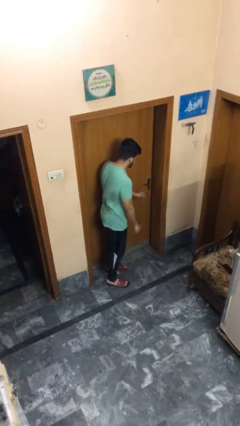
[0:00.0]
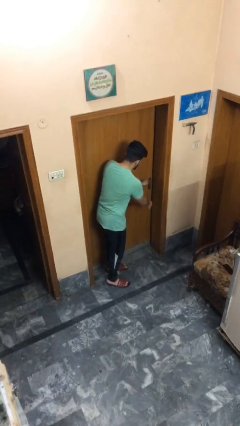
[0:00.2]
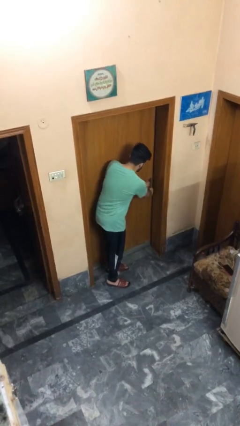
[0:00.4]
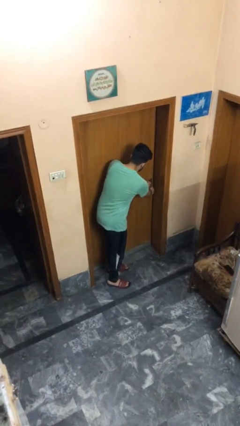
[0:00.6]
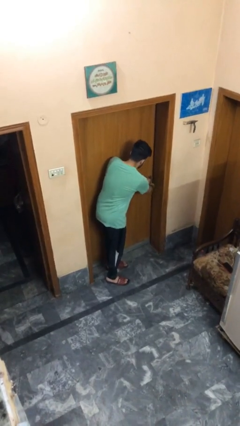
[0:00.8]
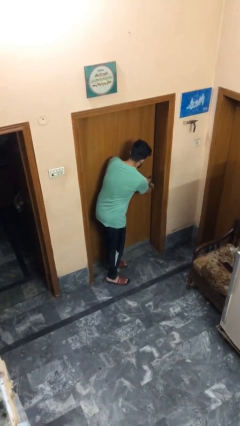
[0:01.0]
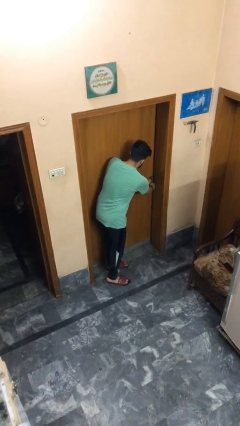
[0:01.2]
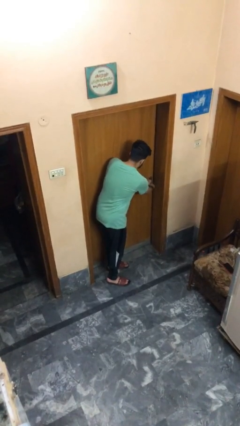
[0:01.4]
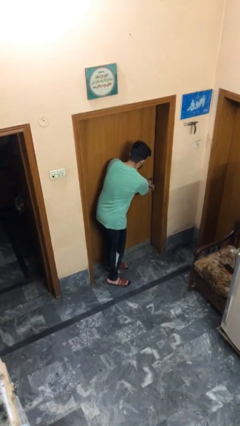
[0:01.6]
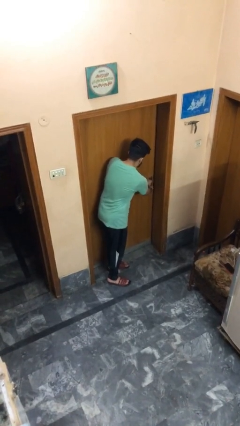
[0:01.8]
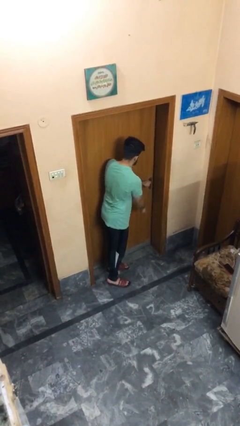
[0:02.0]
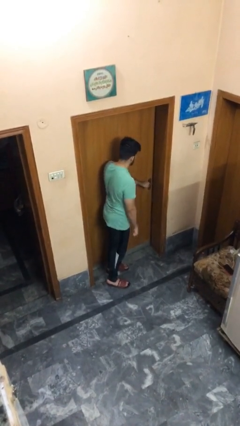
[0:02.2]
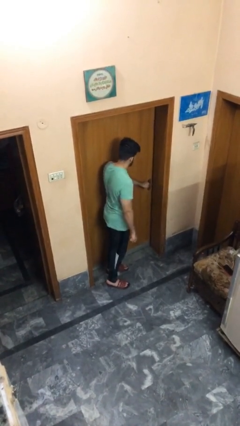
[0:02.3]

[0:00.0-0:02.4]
person unlocks door with keys

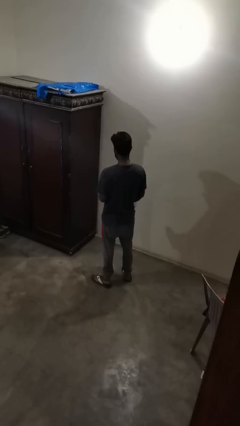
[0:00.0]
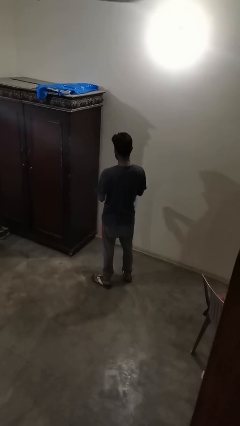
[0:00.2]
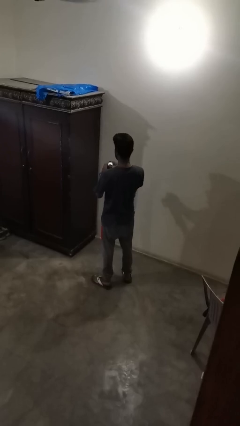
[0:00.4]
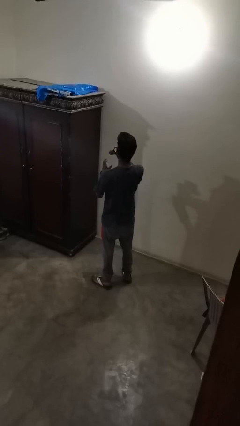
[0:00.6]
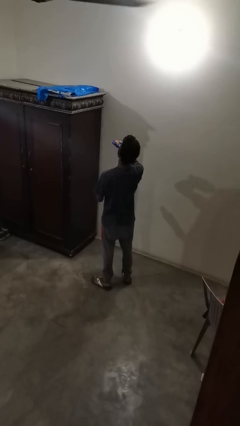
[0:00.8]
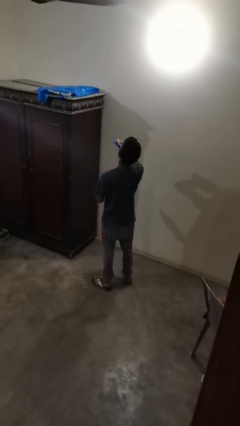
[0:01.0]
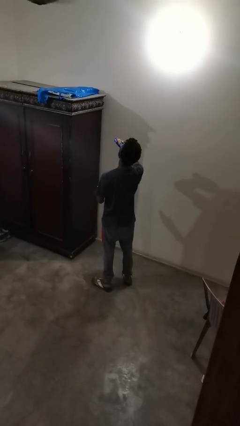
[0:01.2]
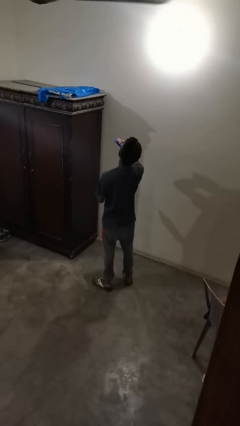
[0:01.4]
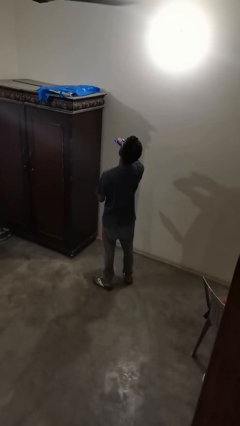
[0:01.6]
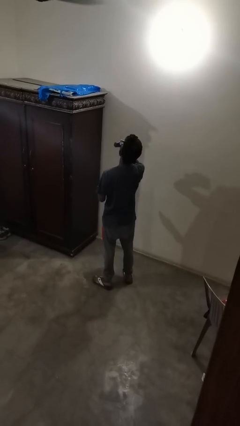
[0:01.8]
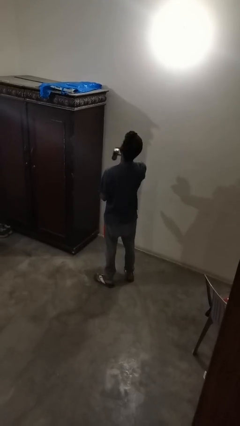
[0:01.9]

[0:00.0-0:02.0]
person drinks from beverage can

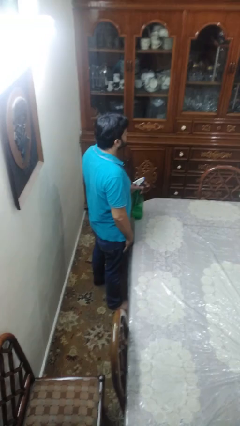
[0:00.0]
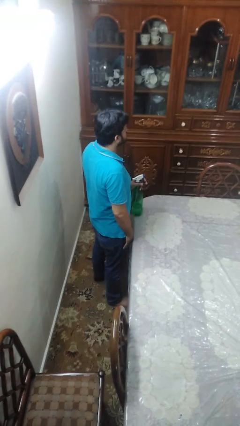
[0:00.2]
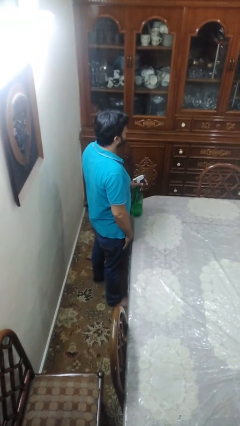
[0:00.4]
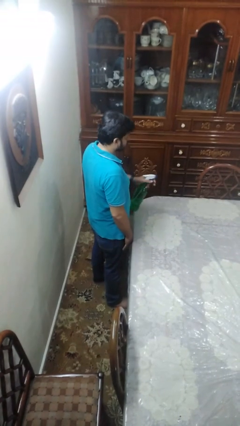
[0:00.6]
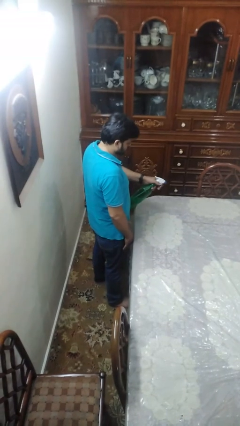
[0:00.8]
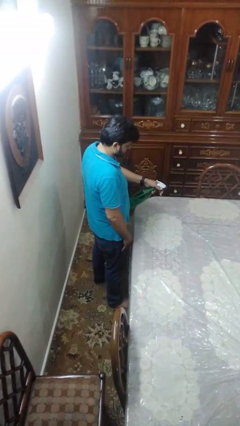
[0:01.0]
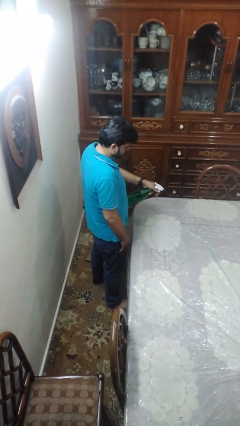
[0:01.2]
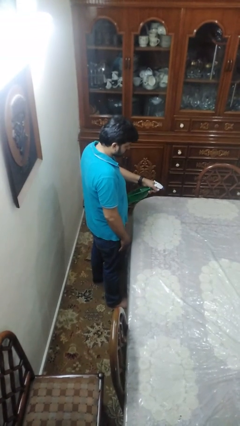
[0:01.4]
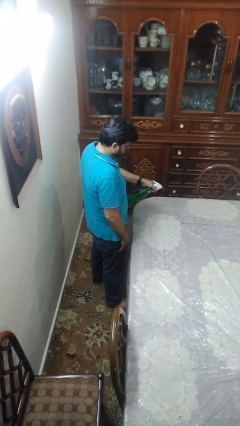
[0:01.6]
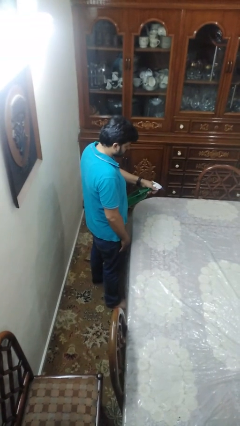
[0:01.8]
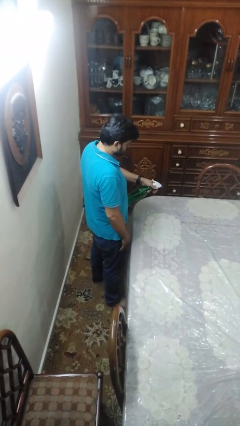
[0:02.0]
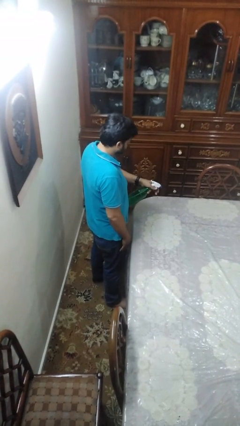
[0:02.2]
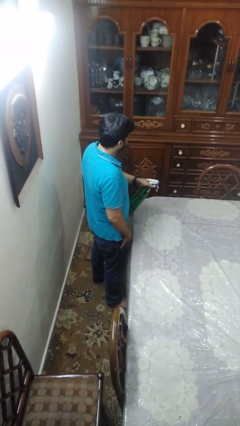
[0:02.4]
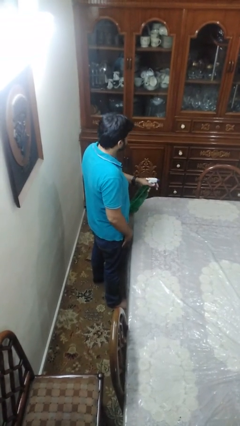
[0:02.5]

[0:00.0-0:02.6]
person sprays from bottle

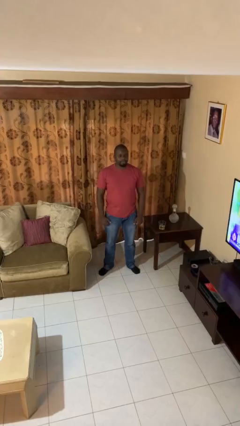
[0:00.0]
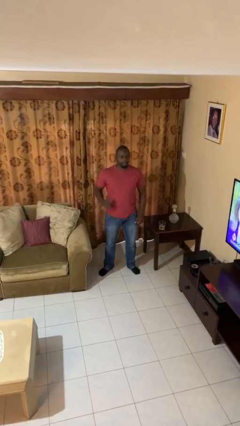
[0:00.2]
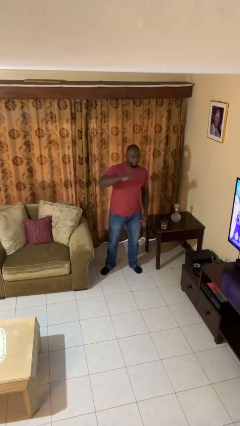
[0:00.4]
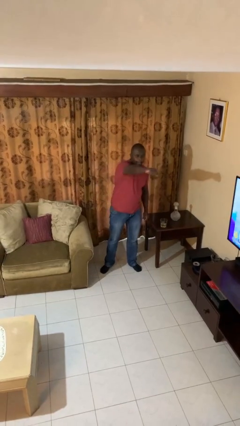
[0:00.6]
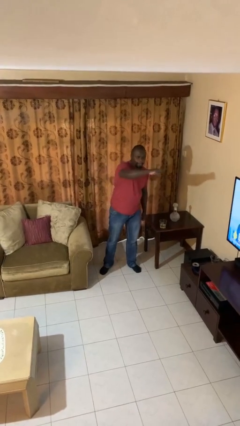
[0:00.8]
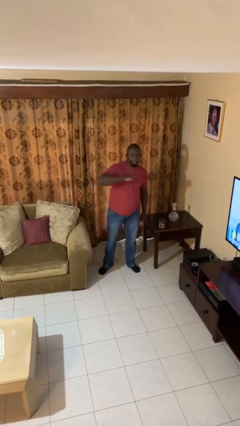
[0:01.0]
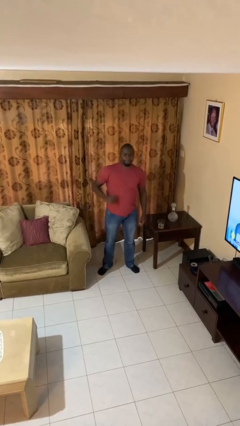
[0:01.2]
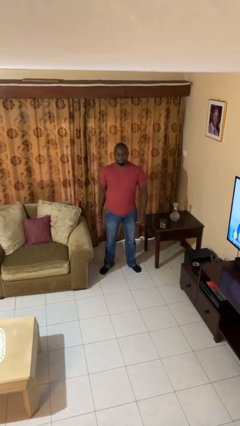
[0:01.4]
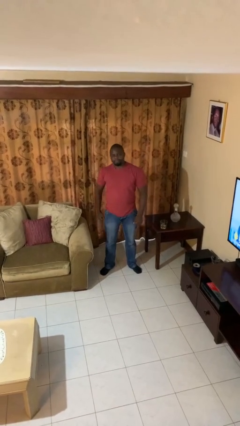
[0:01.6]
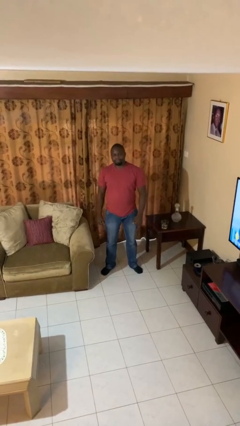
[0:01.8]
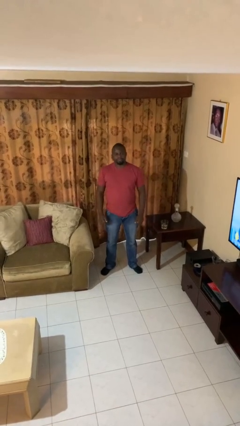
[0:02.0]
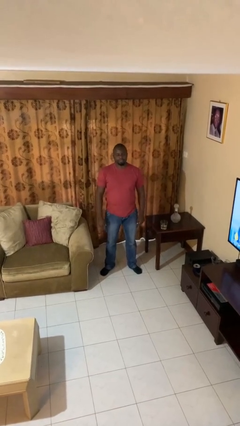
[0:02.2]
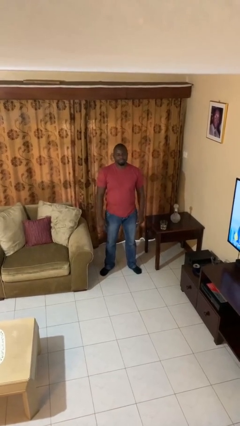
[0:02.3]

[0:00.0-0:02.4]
person punches

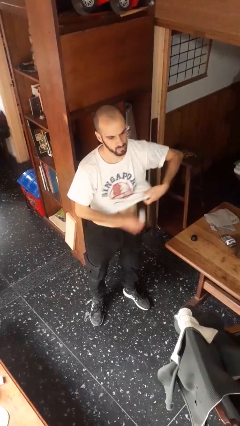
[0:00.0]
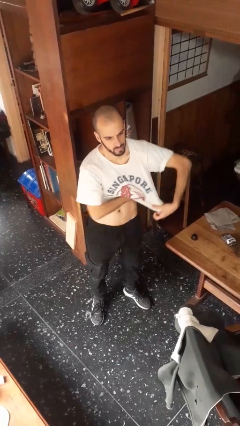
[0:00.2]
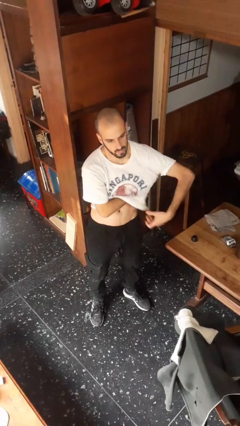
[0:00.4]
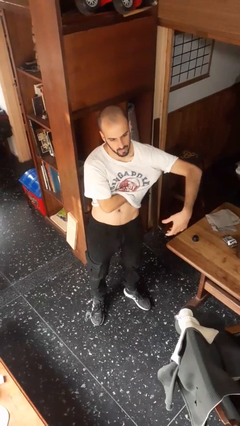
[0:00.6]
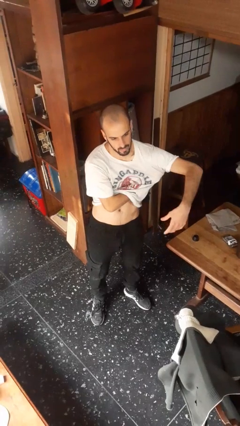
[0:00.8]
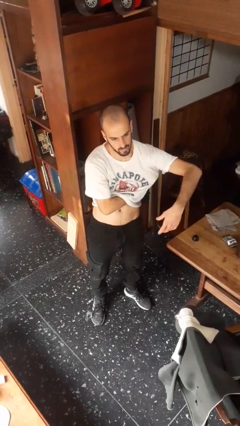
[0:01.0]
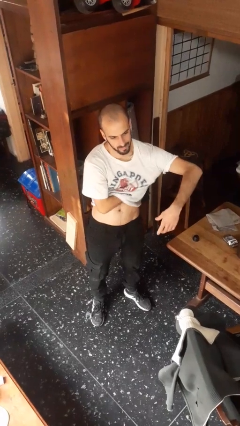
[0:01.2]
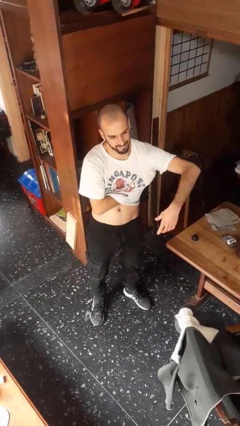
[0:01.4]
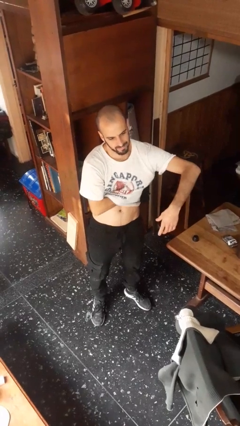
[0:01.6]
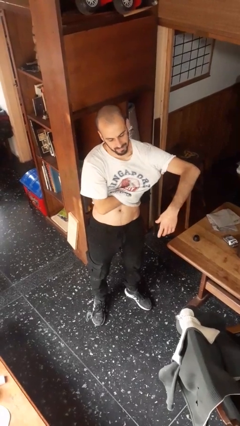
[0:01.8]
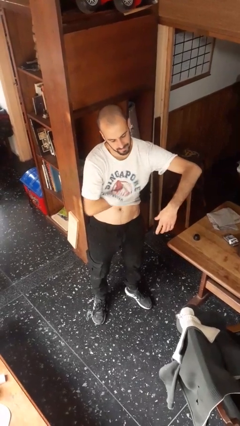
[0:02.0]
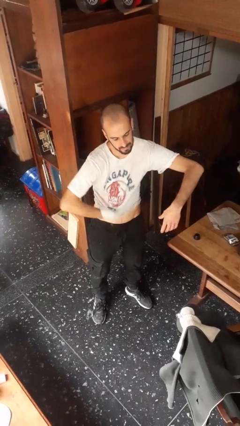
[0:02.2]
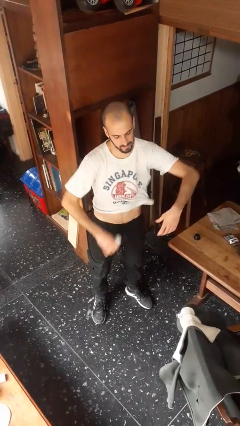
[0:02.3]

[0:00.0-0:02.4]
person applies deodorant

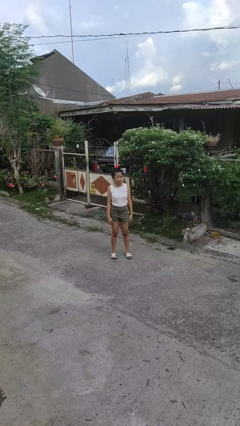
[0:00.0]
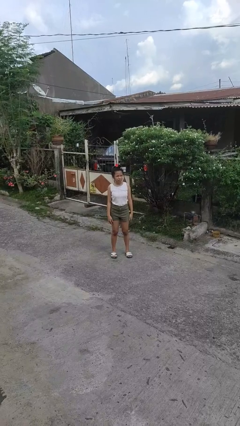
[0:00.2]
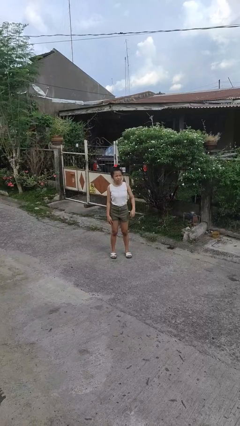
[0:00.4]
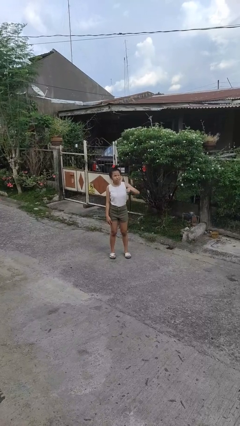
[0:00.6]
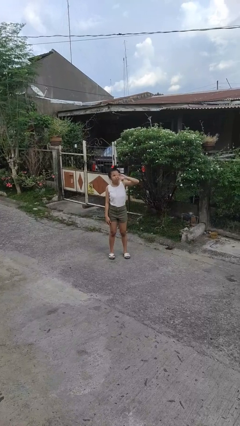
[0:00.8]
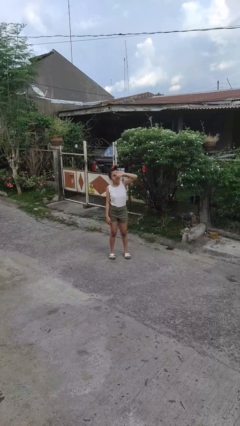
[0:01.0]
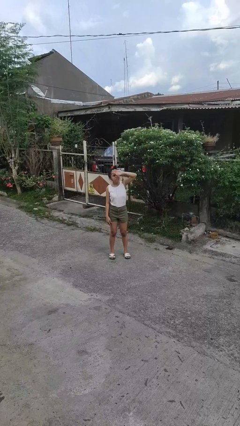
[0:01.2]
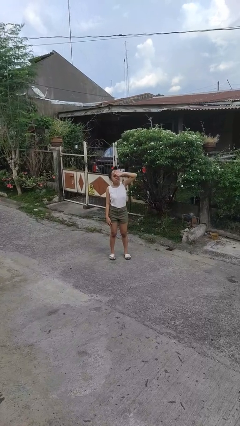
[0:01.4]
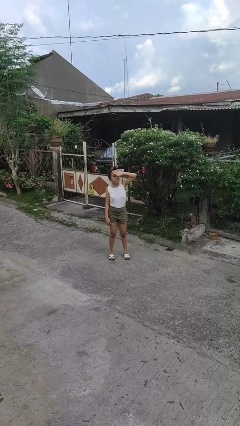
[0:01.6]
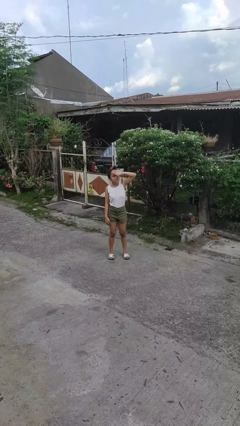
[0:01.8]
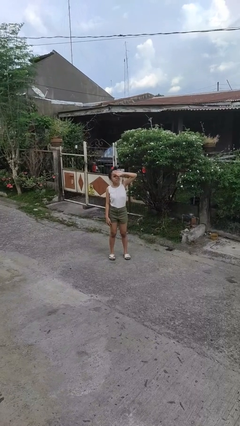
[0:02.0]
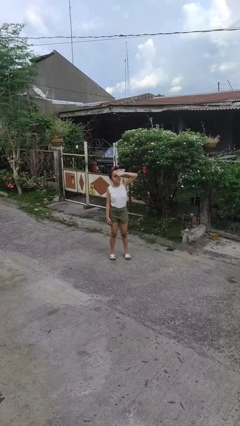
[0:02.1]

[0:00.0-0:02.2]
person shades eyes

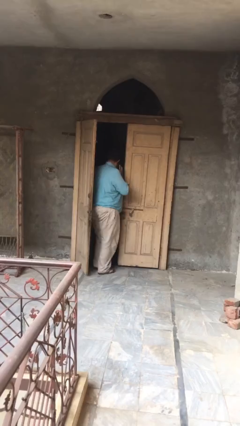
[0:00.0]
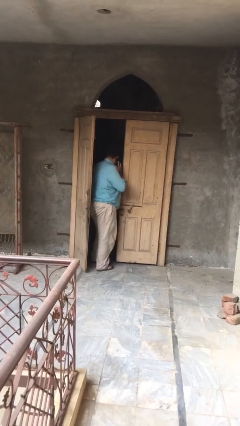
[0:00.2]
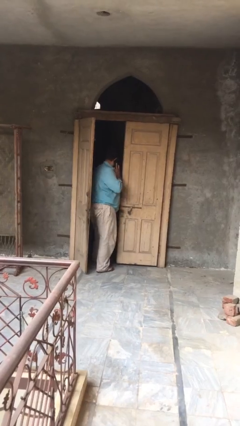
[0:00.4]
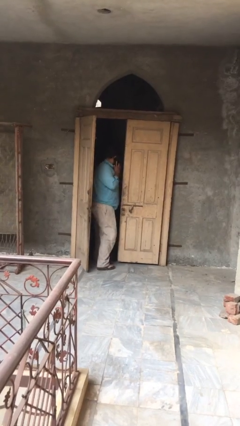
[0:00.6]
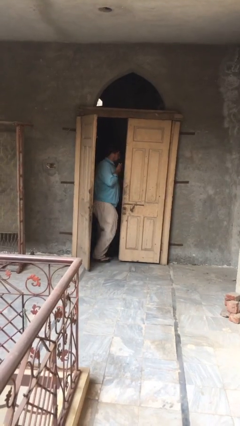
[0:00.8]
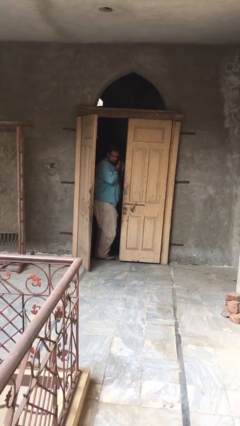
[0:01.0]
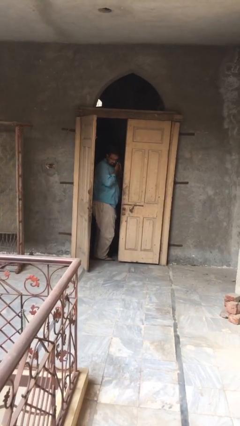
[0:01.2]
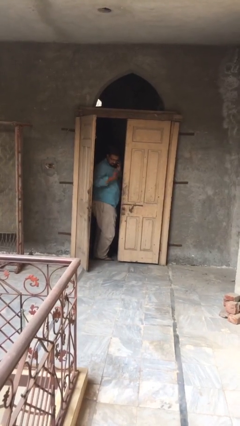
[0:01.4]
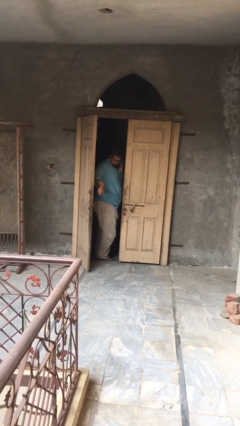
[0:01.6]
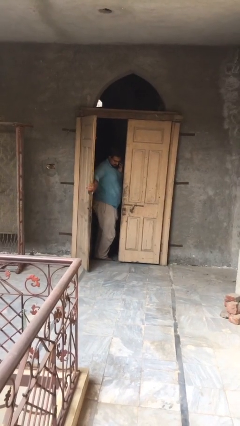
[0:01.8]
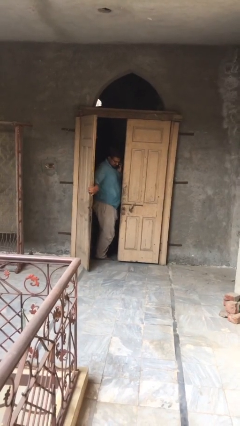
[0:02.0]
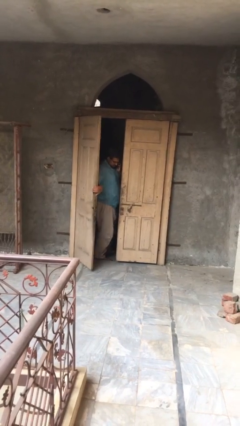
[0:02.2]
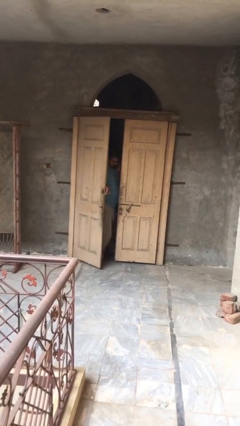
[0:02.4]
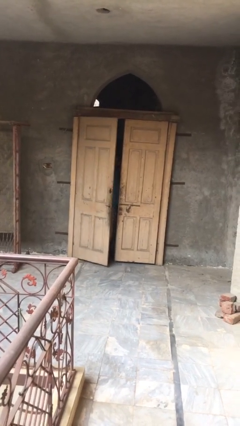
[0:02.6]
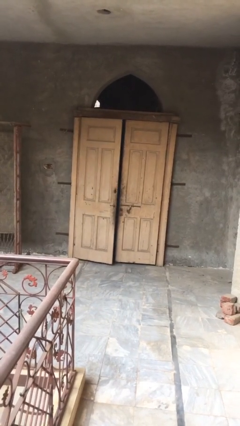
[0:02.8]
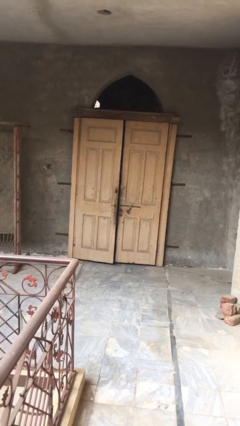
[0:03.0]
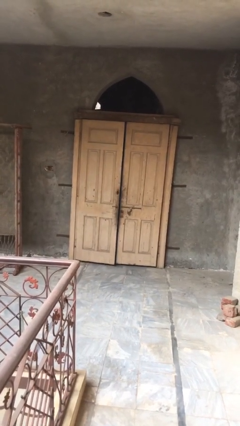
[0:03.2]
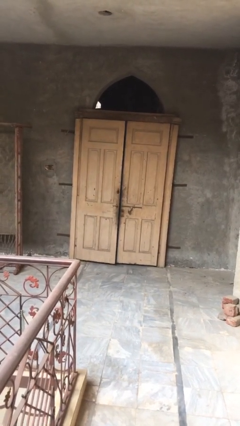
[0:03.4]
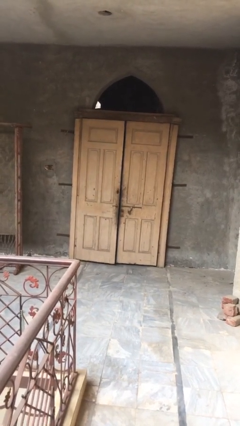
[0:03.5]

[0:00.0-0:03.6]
person closes facility door
